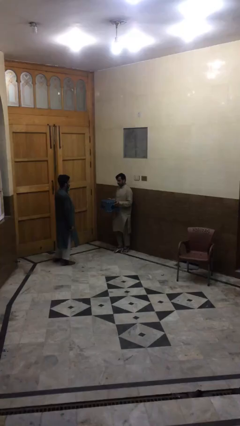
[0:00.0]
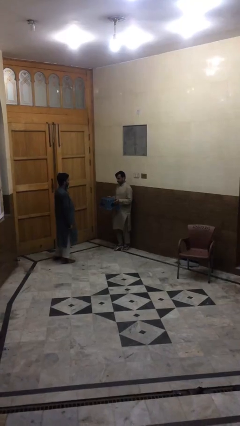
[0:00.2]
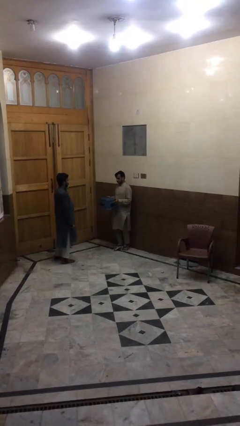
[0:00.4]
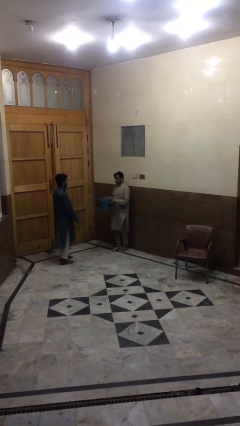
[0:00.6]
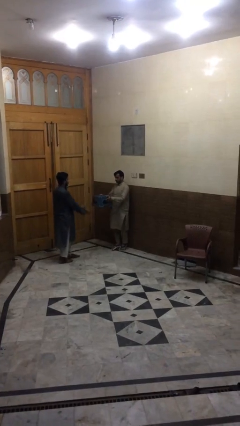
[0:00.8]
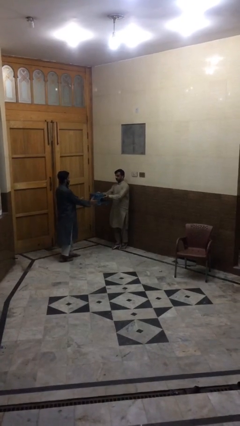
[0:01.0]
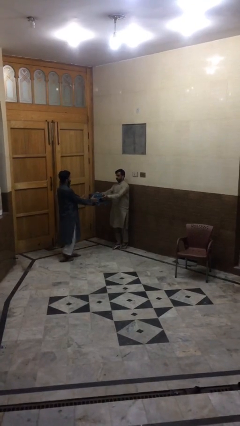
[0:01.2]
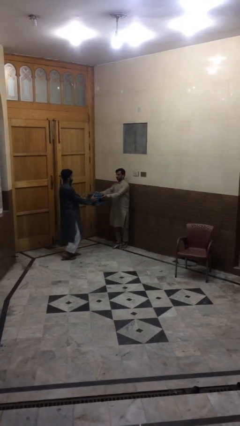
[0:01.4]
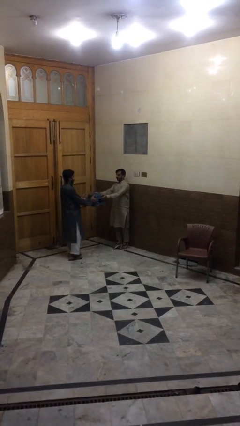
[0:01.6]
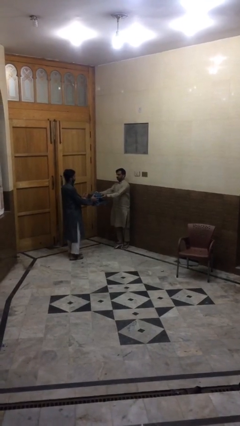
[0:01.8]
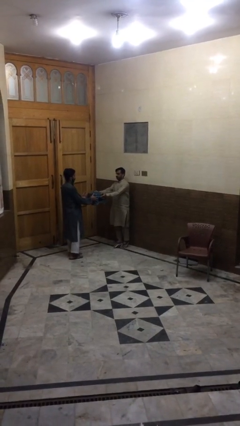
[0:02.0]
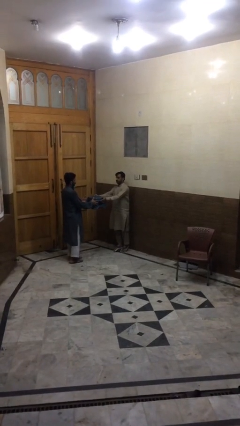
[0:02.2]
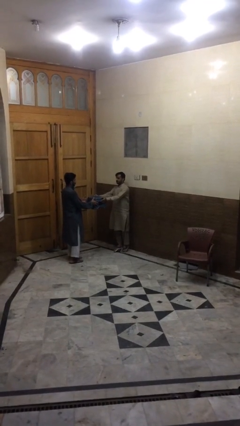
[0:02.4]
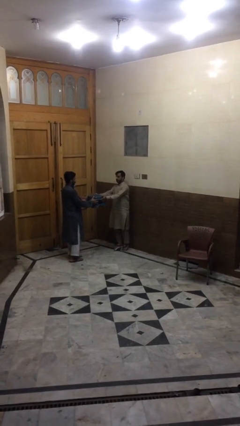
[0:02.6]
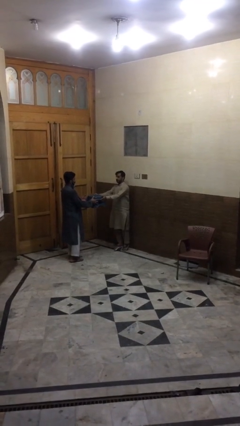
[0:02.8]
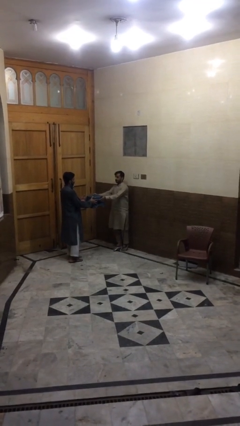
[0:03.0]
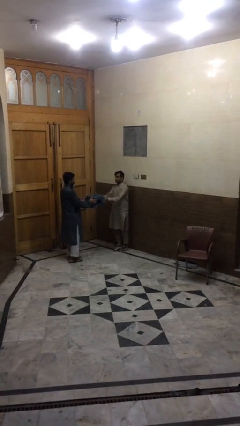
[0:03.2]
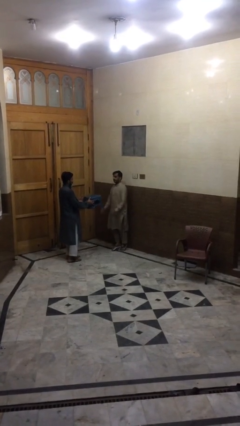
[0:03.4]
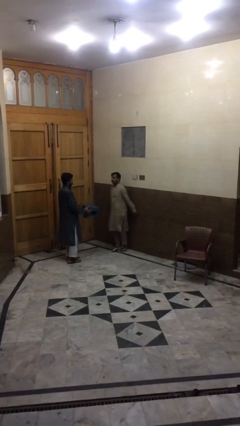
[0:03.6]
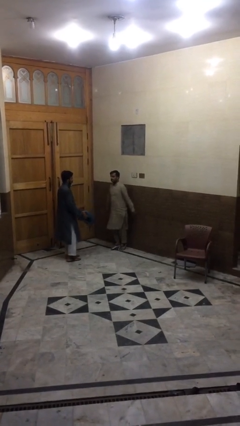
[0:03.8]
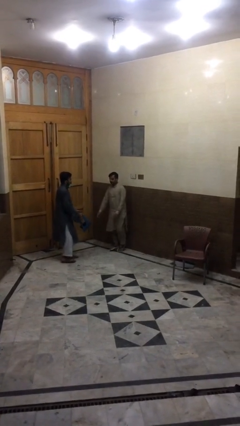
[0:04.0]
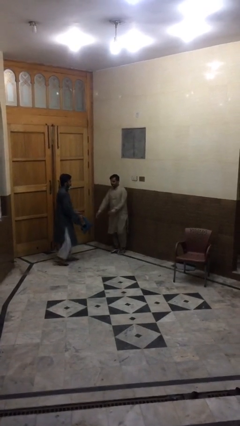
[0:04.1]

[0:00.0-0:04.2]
person transfers object to person

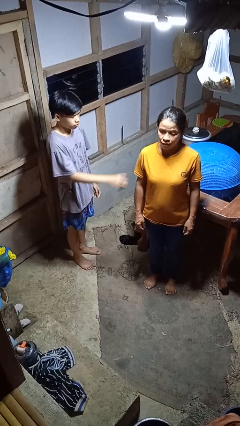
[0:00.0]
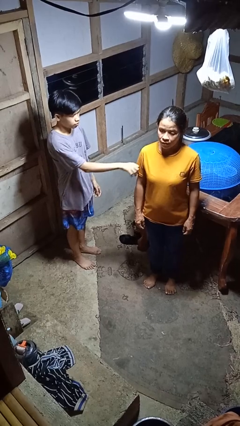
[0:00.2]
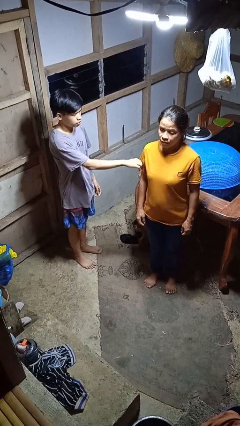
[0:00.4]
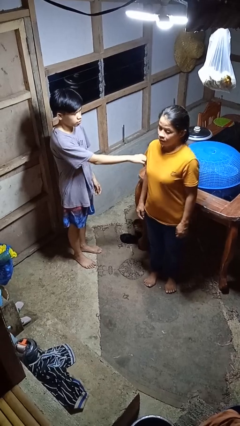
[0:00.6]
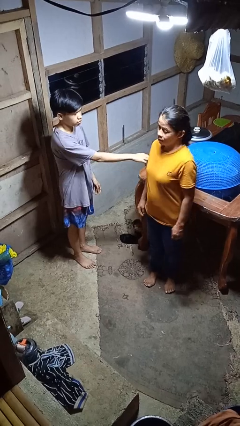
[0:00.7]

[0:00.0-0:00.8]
person grabs person by bicep

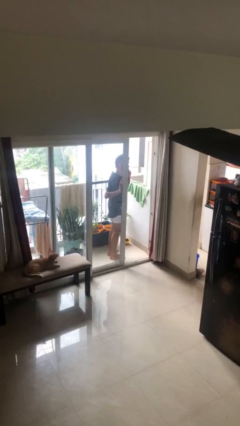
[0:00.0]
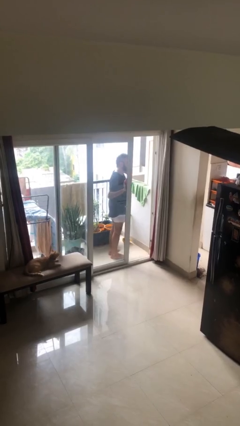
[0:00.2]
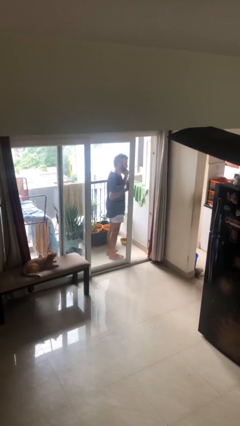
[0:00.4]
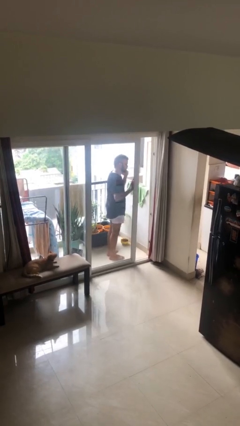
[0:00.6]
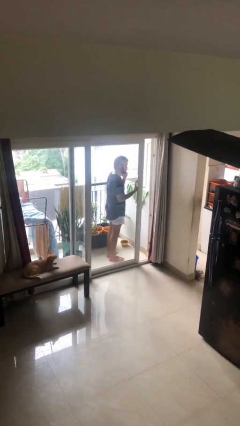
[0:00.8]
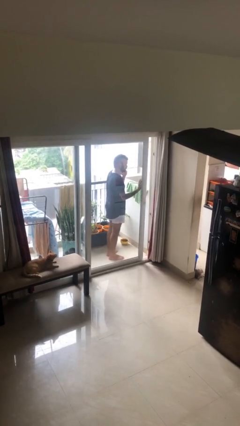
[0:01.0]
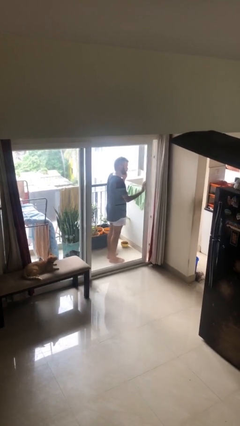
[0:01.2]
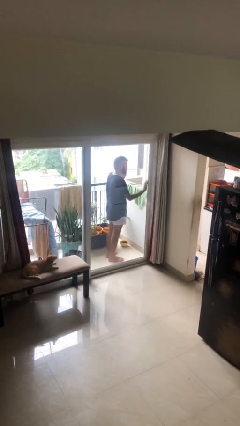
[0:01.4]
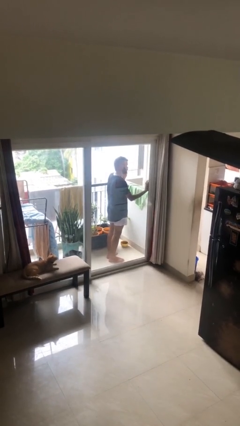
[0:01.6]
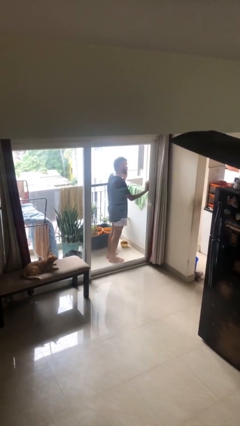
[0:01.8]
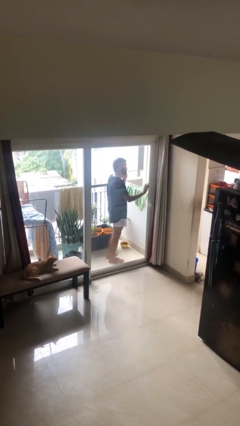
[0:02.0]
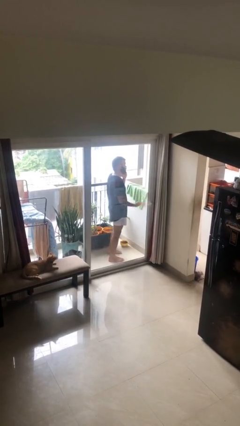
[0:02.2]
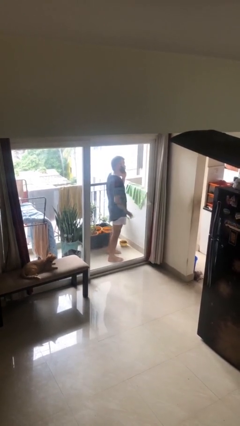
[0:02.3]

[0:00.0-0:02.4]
person closes facility door

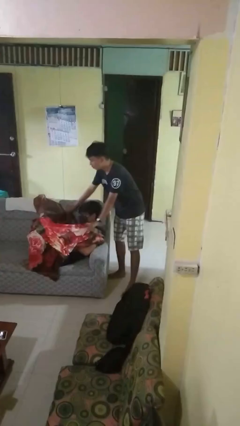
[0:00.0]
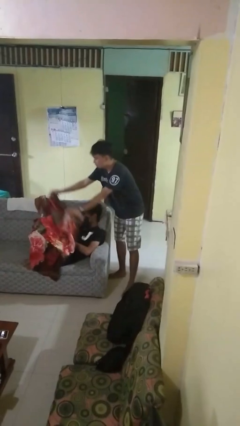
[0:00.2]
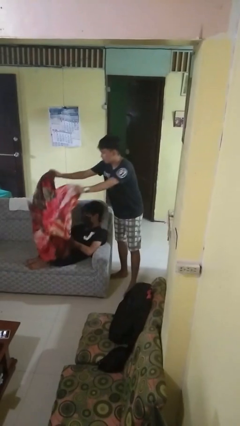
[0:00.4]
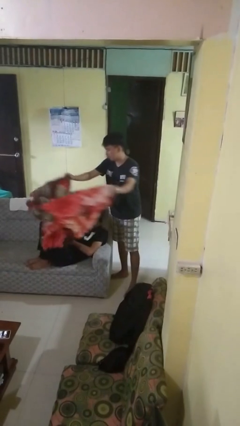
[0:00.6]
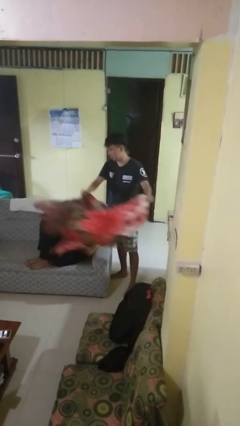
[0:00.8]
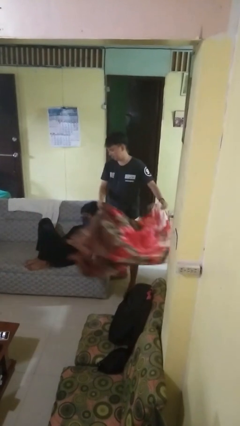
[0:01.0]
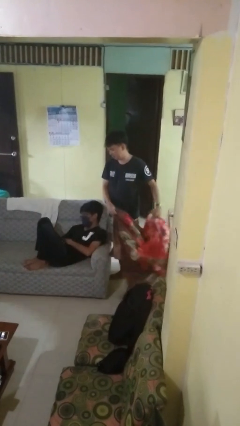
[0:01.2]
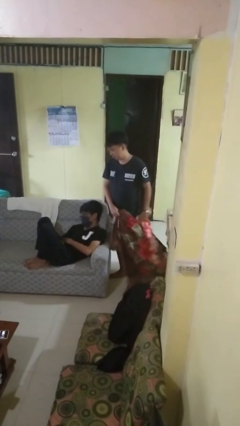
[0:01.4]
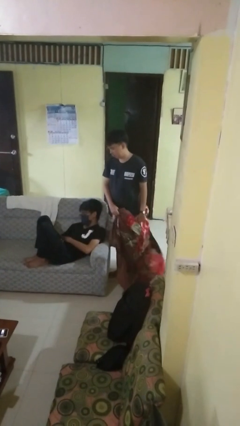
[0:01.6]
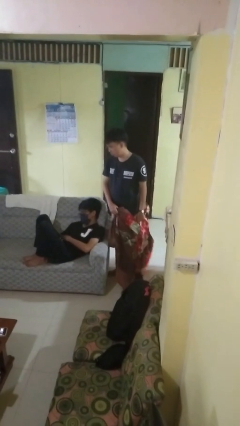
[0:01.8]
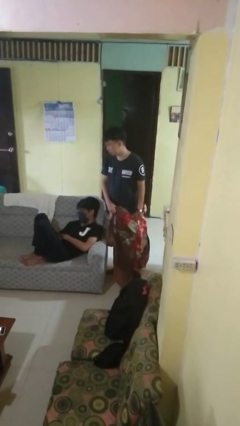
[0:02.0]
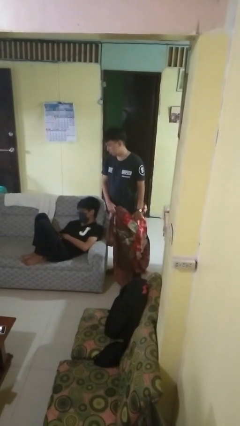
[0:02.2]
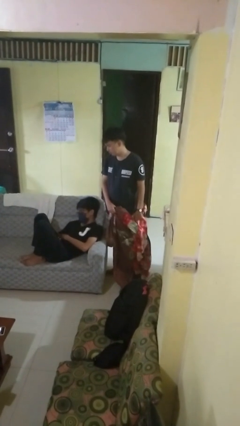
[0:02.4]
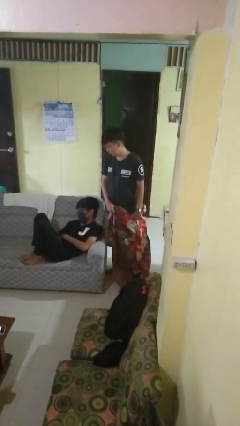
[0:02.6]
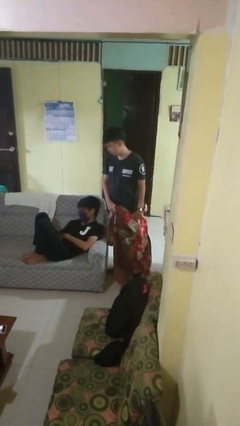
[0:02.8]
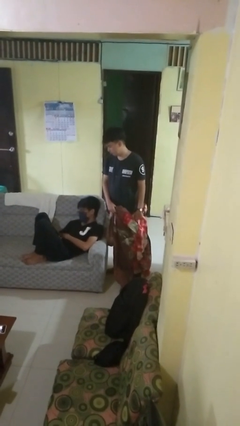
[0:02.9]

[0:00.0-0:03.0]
person uncovers friend with blanket

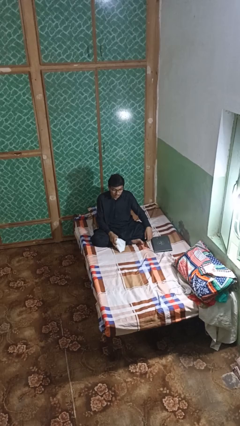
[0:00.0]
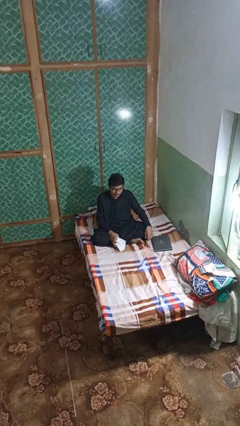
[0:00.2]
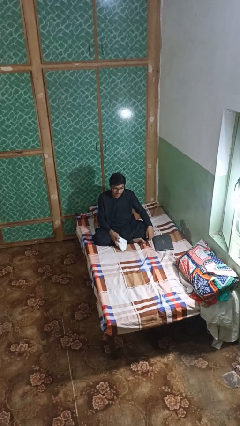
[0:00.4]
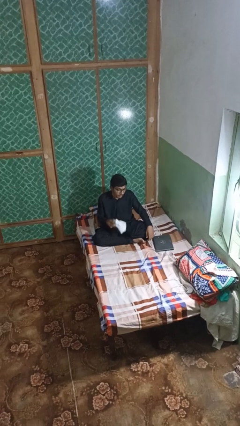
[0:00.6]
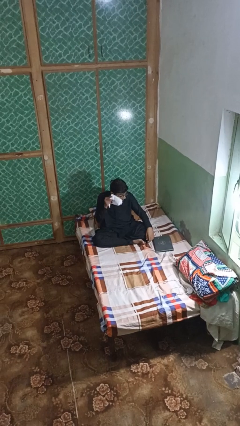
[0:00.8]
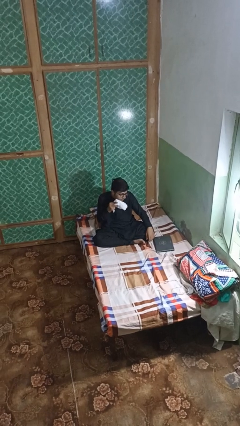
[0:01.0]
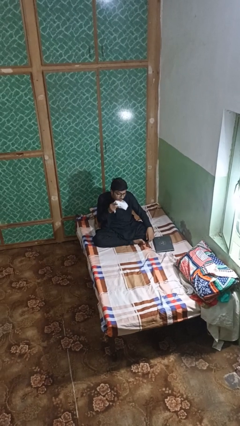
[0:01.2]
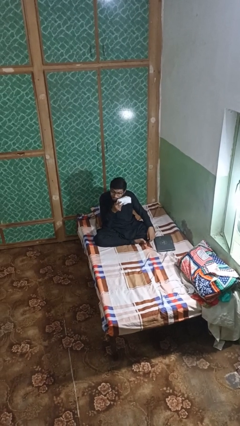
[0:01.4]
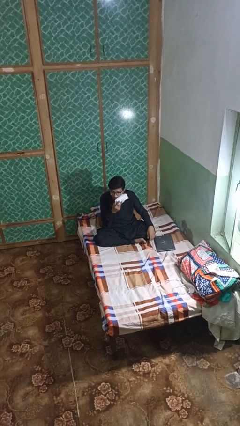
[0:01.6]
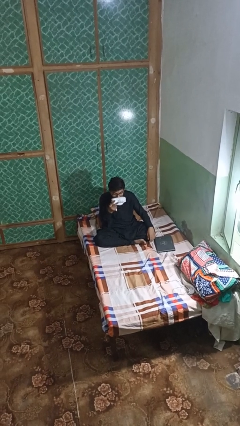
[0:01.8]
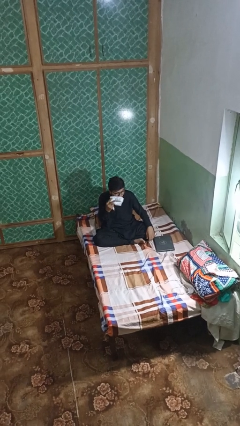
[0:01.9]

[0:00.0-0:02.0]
person wipes mouth with napkin

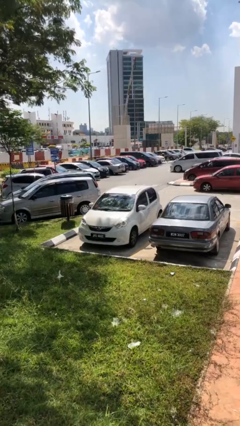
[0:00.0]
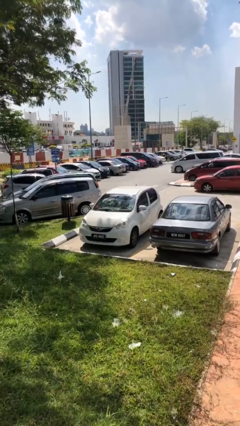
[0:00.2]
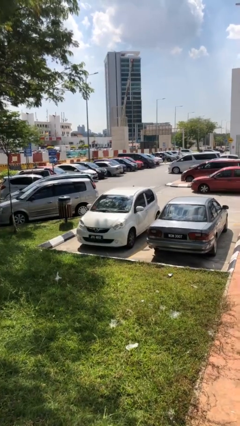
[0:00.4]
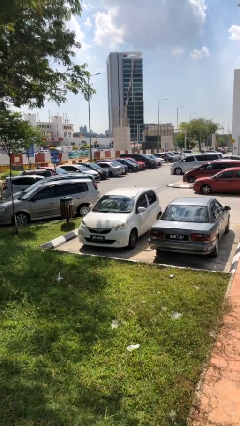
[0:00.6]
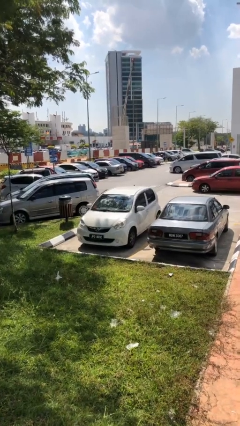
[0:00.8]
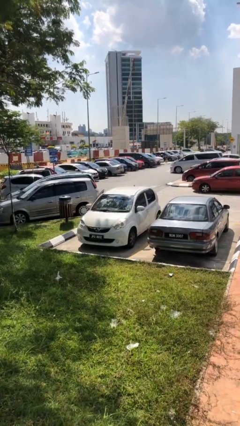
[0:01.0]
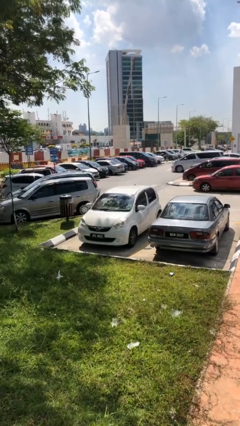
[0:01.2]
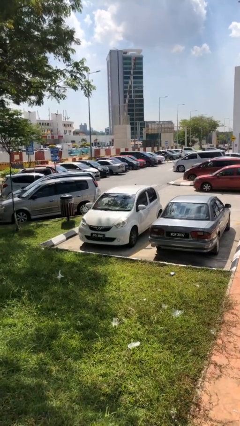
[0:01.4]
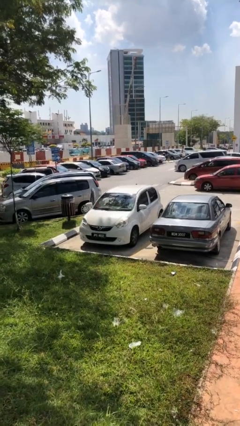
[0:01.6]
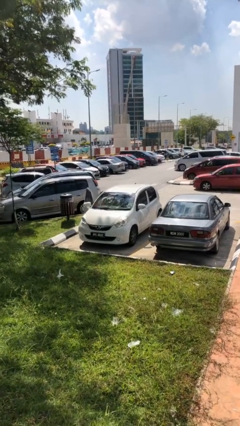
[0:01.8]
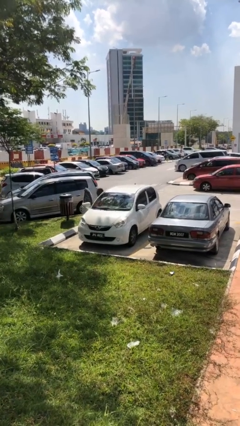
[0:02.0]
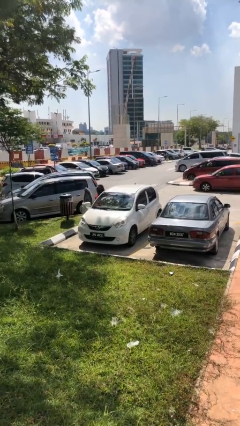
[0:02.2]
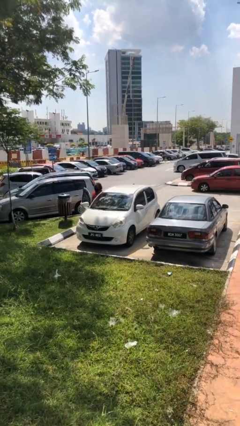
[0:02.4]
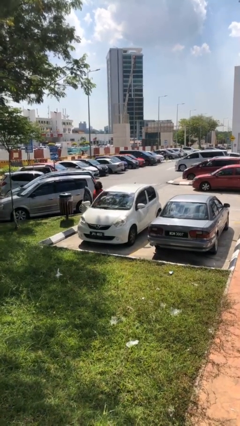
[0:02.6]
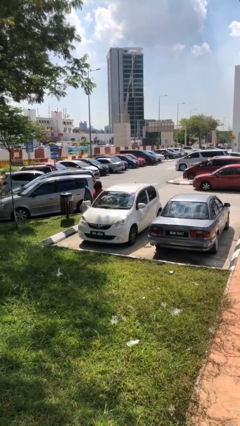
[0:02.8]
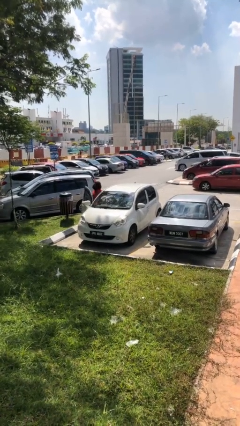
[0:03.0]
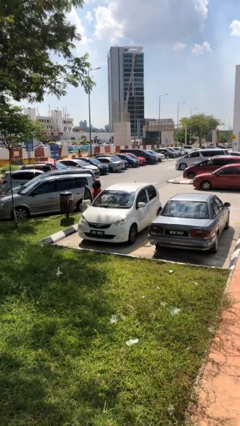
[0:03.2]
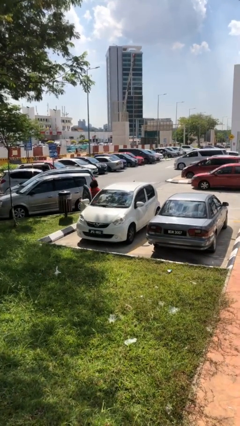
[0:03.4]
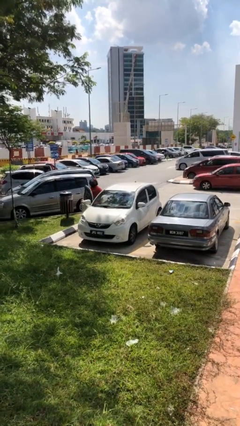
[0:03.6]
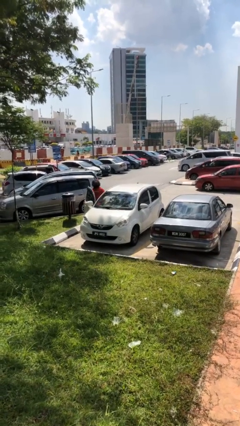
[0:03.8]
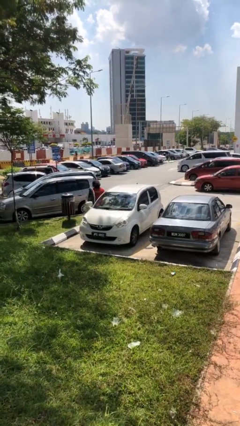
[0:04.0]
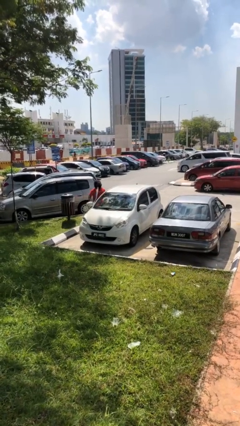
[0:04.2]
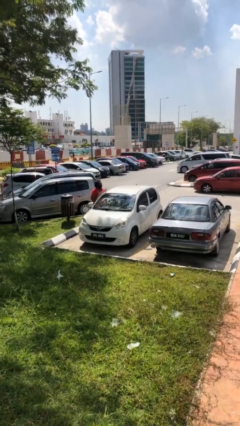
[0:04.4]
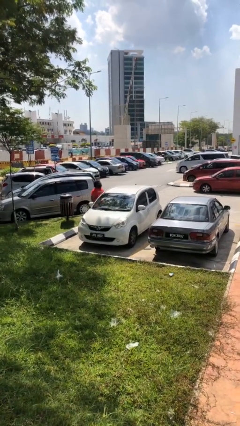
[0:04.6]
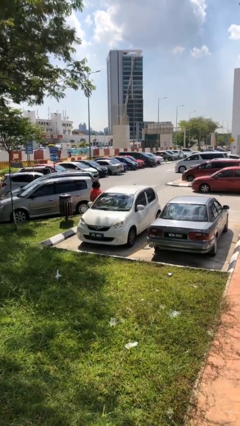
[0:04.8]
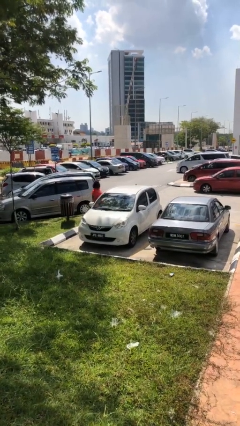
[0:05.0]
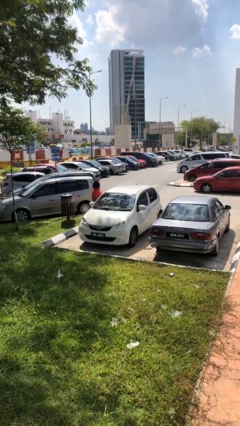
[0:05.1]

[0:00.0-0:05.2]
car drops off person

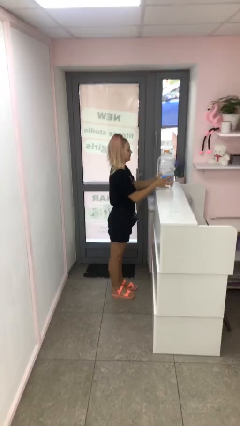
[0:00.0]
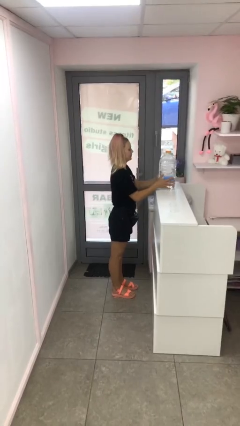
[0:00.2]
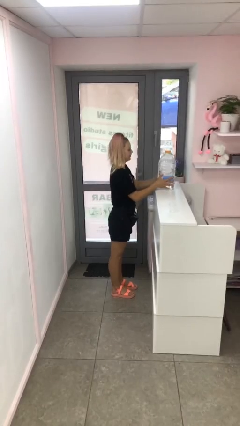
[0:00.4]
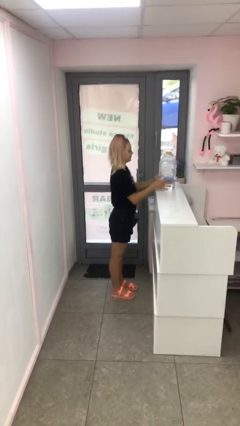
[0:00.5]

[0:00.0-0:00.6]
person puts down object on countertop
